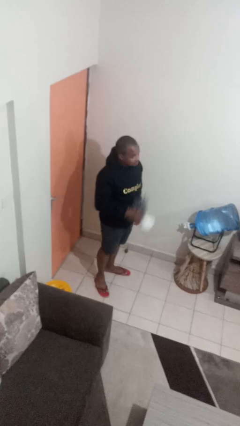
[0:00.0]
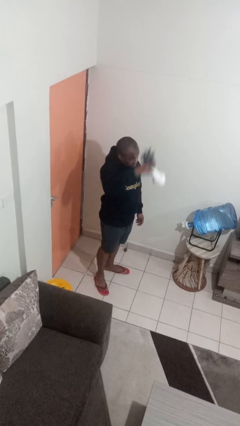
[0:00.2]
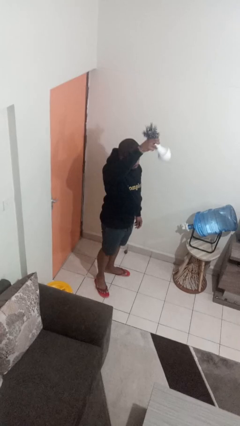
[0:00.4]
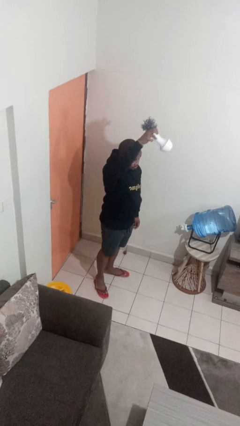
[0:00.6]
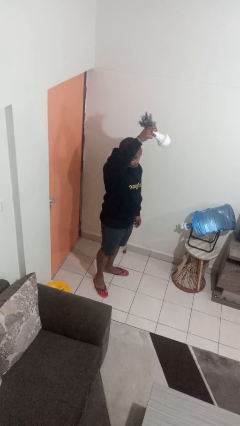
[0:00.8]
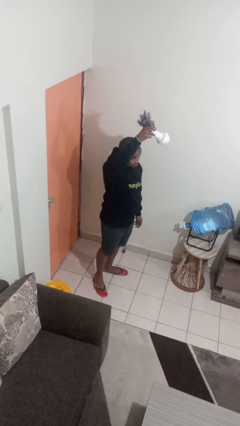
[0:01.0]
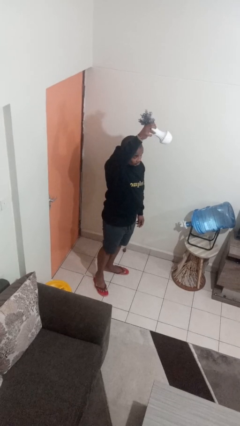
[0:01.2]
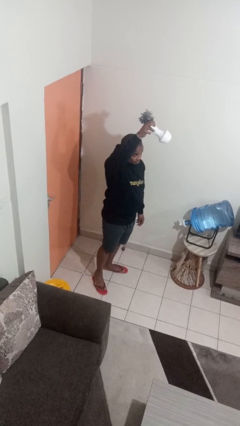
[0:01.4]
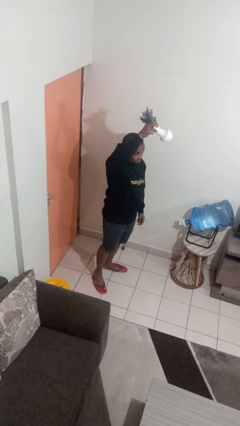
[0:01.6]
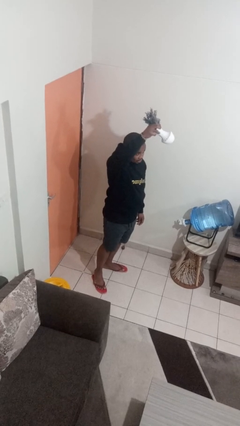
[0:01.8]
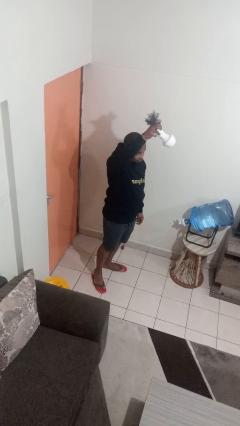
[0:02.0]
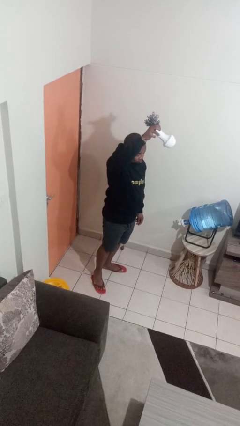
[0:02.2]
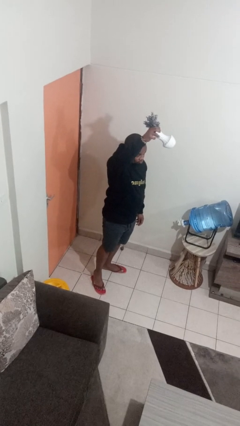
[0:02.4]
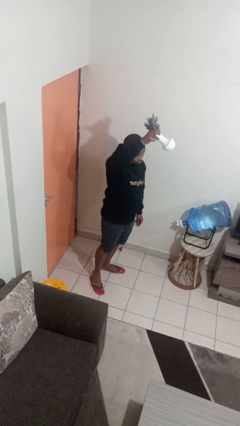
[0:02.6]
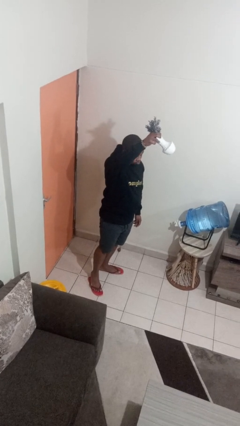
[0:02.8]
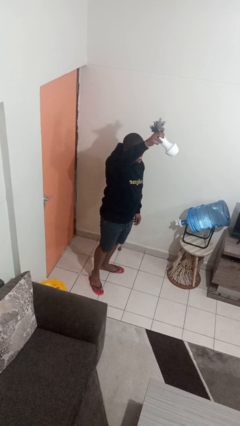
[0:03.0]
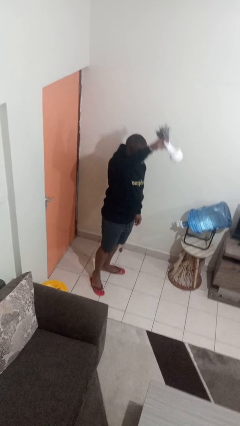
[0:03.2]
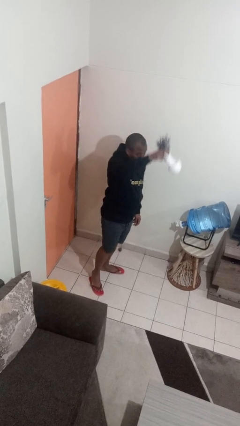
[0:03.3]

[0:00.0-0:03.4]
person holds object above head

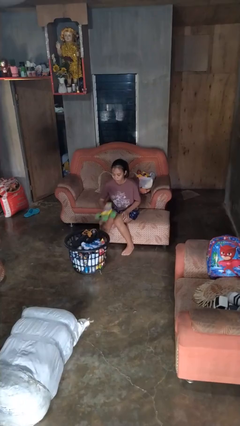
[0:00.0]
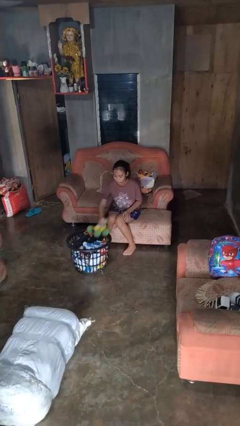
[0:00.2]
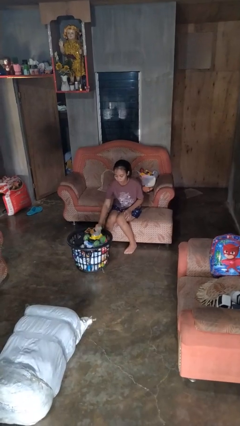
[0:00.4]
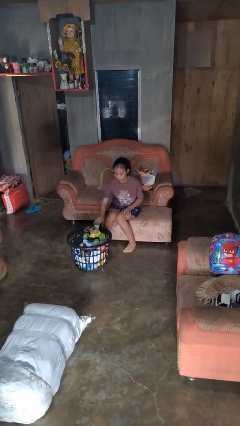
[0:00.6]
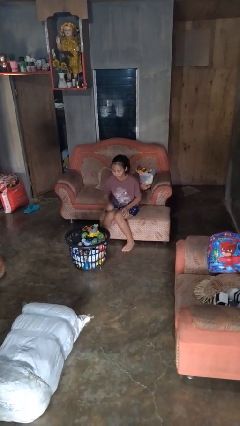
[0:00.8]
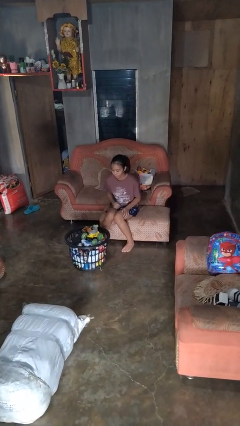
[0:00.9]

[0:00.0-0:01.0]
person puts object into basket

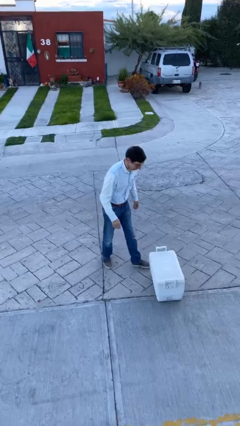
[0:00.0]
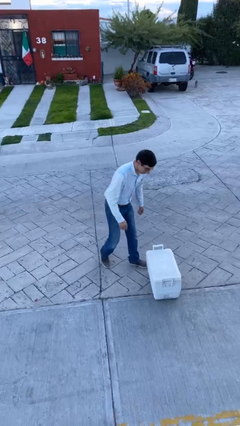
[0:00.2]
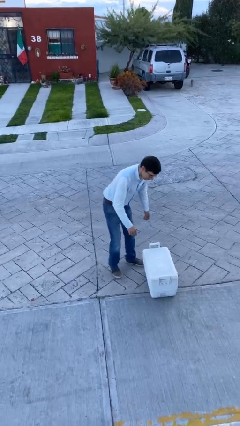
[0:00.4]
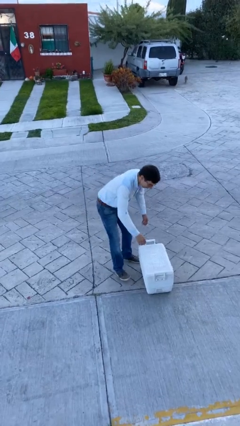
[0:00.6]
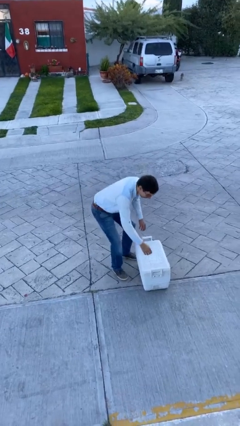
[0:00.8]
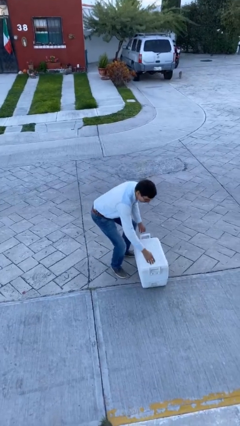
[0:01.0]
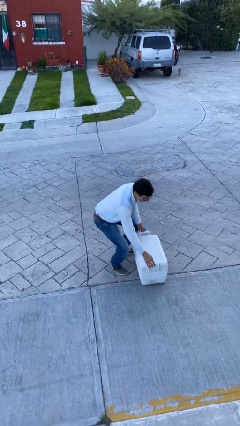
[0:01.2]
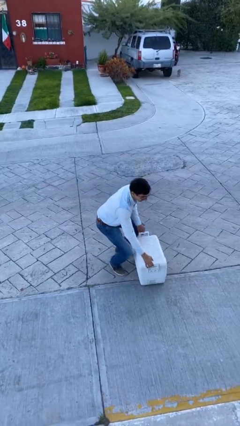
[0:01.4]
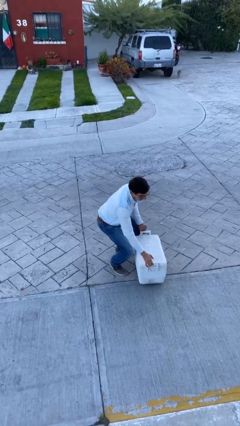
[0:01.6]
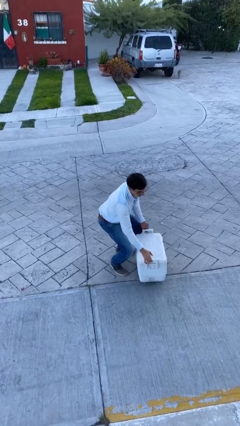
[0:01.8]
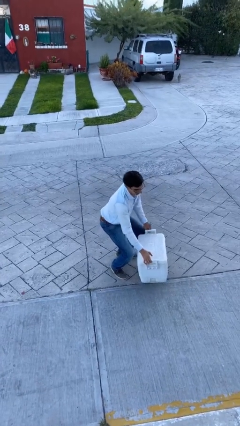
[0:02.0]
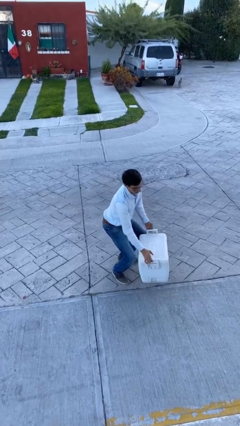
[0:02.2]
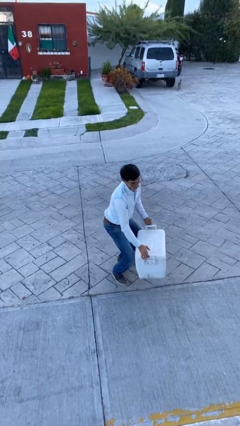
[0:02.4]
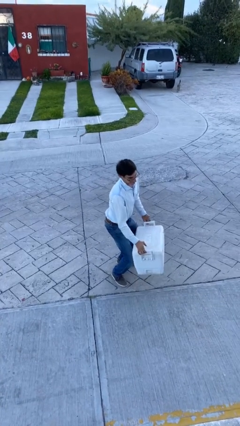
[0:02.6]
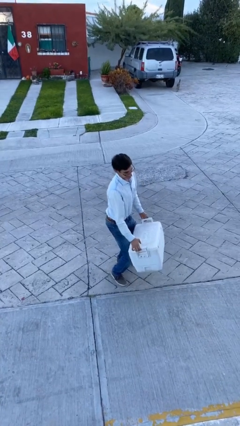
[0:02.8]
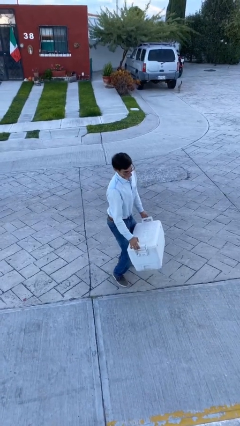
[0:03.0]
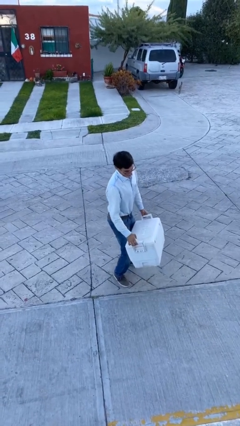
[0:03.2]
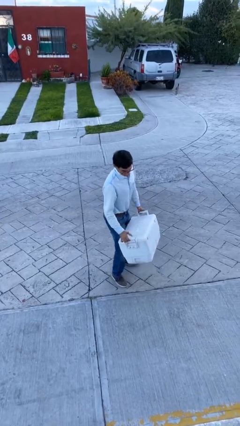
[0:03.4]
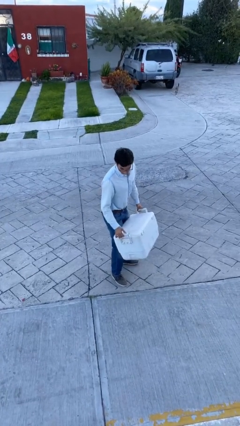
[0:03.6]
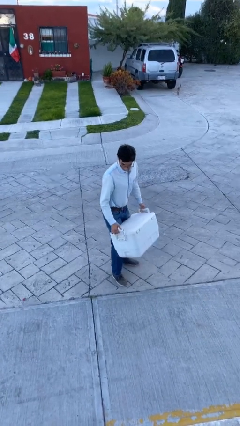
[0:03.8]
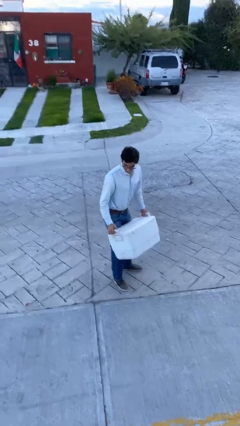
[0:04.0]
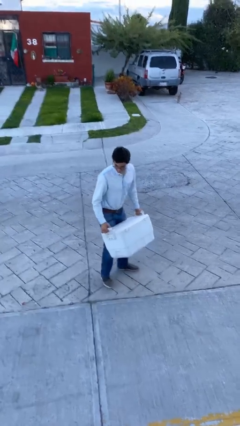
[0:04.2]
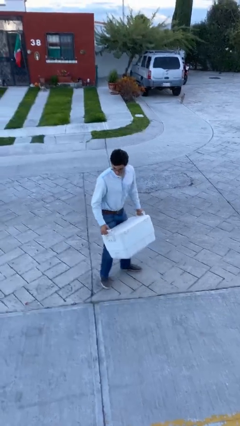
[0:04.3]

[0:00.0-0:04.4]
person picks up object from floor

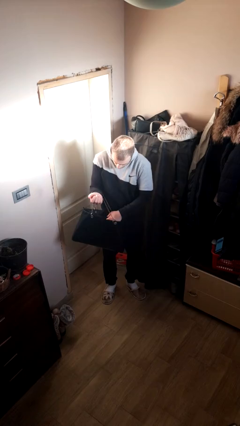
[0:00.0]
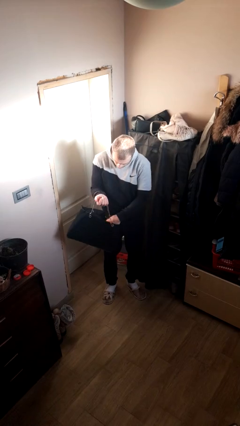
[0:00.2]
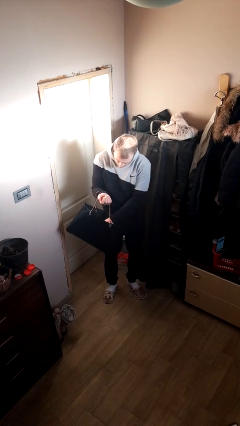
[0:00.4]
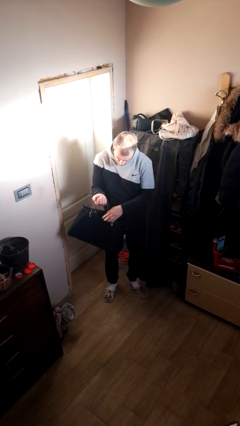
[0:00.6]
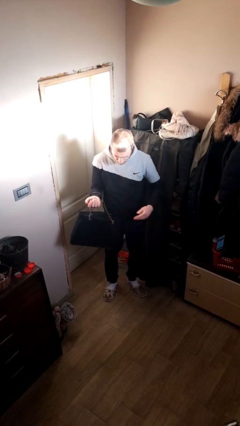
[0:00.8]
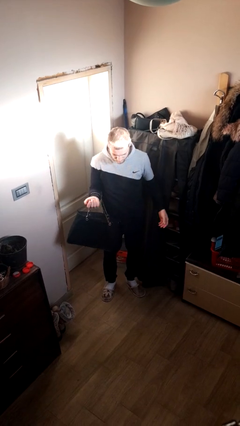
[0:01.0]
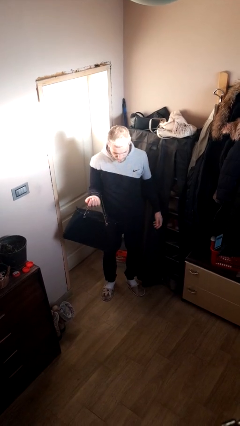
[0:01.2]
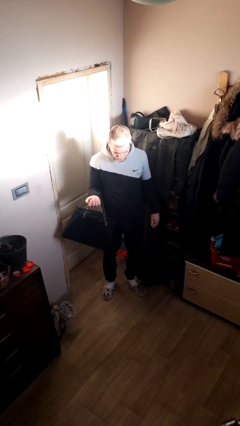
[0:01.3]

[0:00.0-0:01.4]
person puts object into purse

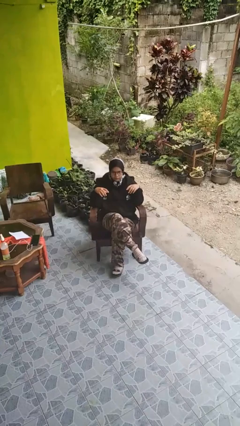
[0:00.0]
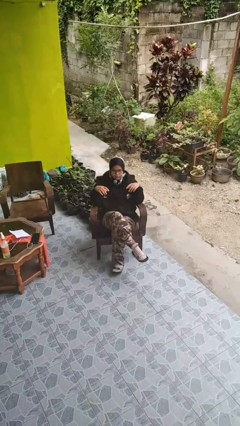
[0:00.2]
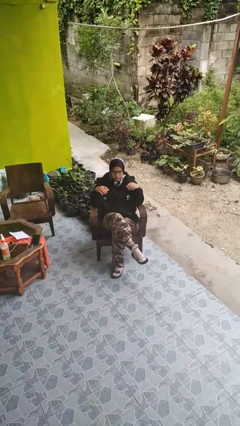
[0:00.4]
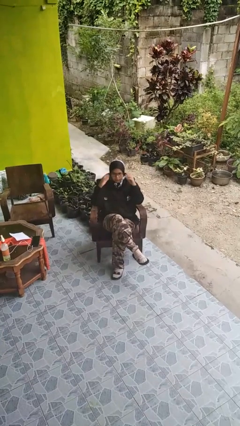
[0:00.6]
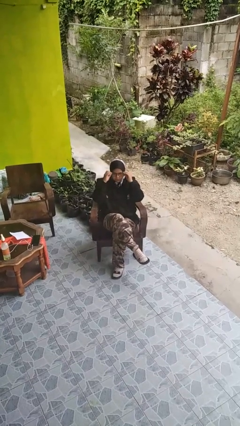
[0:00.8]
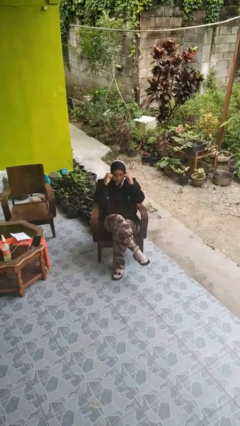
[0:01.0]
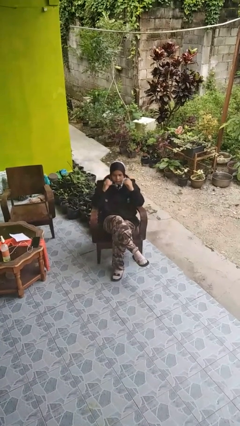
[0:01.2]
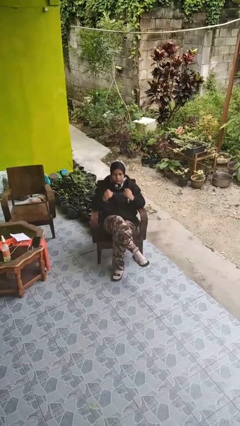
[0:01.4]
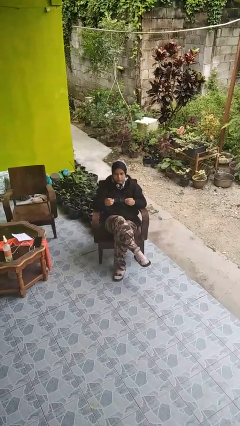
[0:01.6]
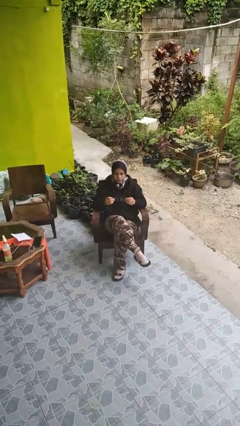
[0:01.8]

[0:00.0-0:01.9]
person takes off glasses

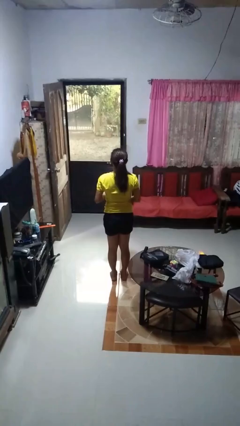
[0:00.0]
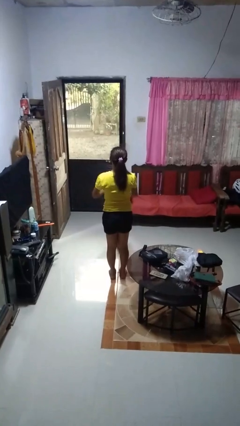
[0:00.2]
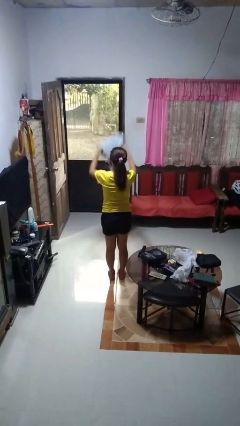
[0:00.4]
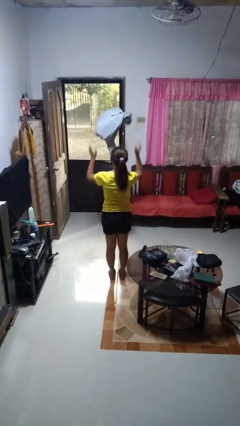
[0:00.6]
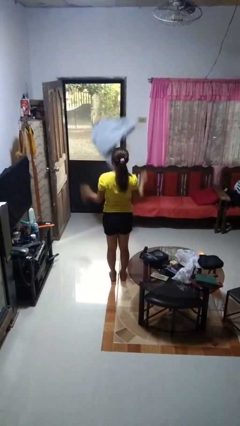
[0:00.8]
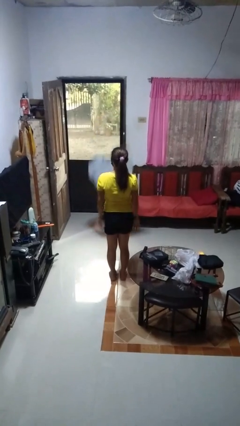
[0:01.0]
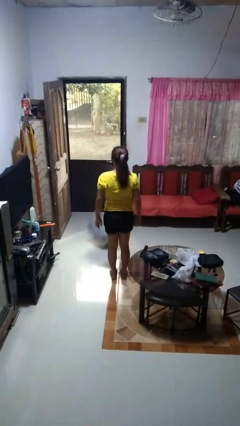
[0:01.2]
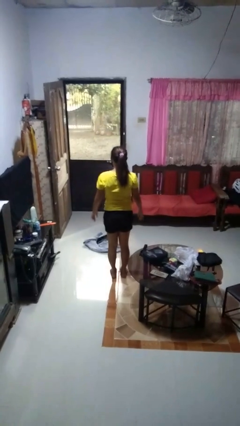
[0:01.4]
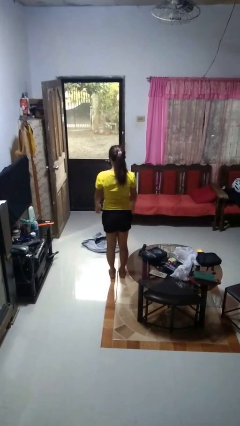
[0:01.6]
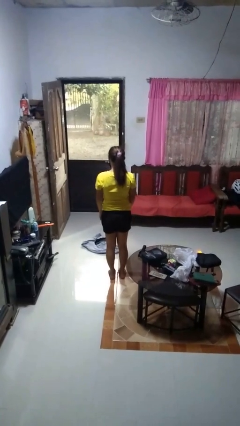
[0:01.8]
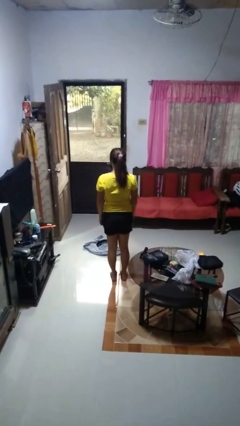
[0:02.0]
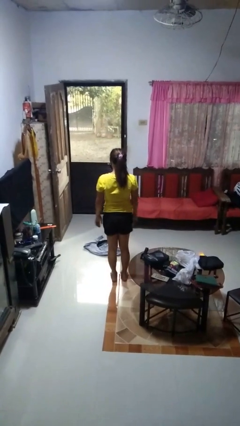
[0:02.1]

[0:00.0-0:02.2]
person throws object into air

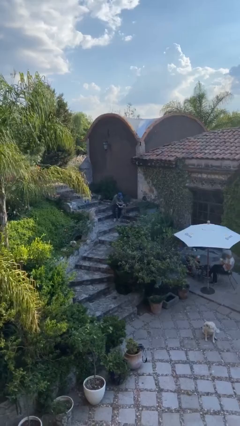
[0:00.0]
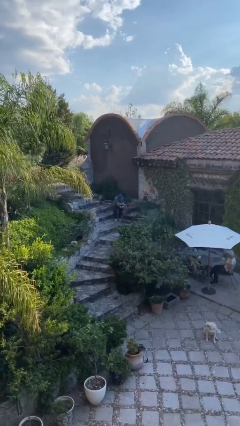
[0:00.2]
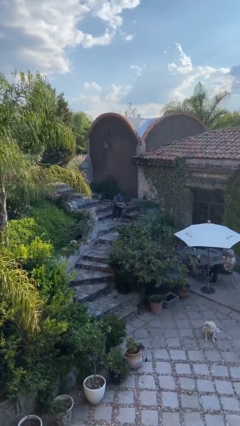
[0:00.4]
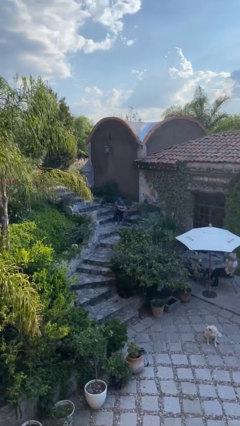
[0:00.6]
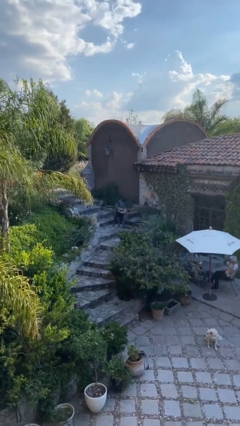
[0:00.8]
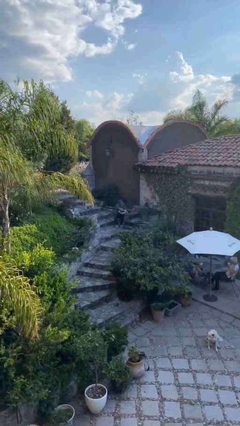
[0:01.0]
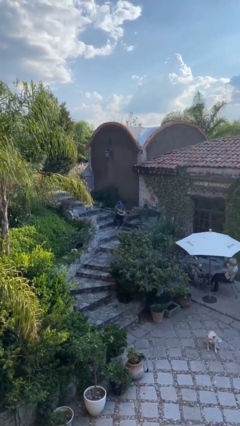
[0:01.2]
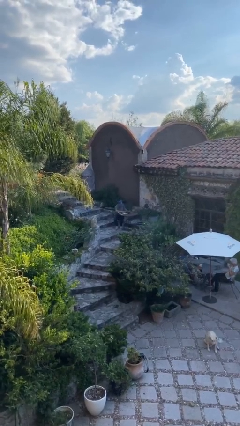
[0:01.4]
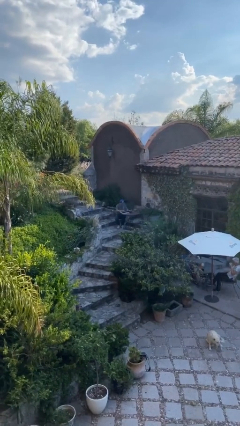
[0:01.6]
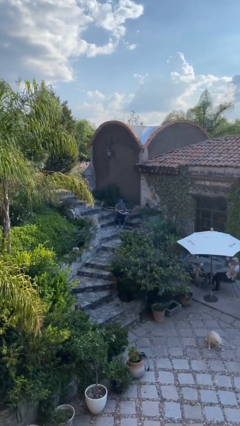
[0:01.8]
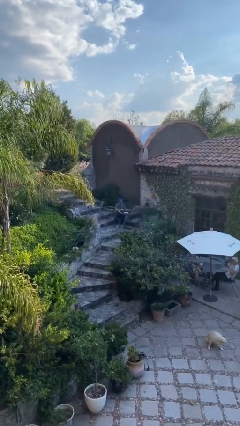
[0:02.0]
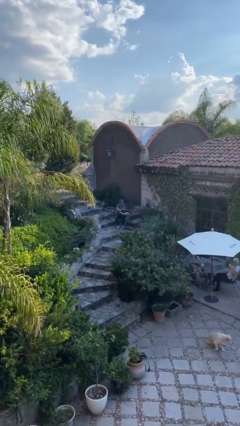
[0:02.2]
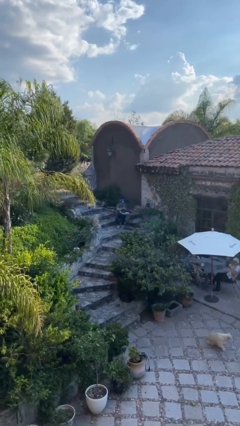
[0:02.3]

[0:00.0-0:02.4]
person sits down

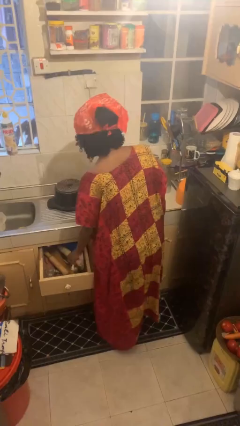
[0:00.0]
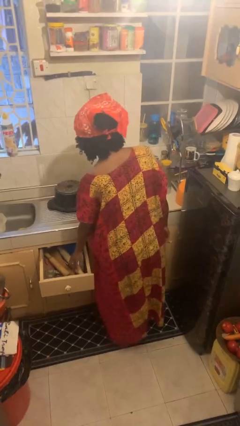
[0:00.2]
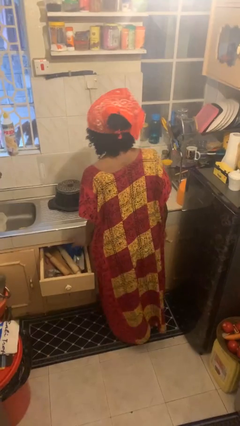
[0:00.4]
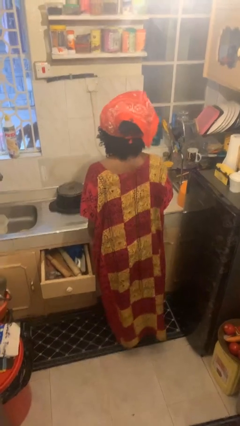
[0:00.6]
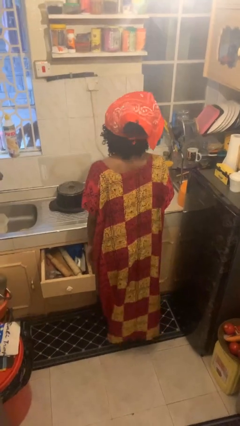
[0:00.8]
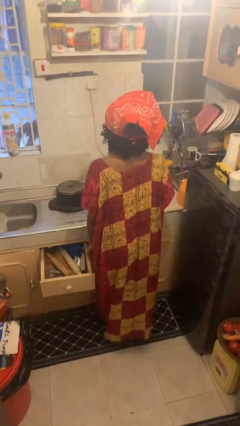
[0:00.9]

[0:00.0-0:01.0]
person puts object into kitchen drawer
